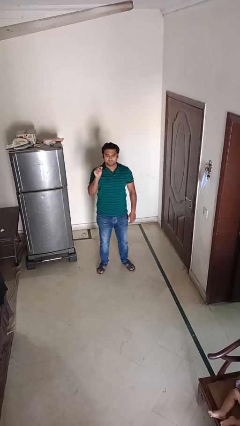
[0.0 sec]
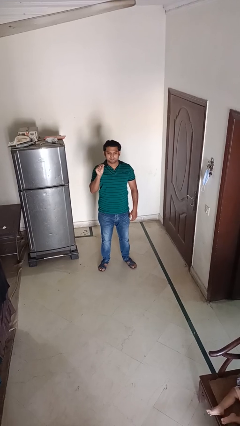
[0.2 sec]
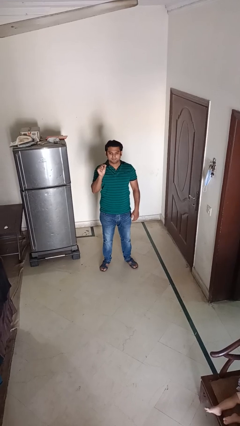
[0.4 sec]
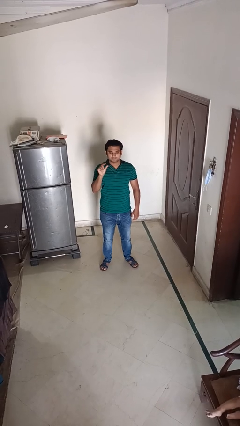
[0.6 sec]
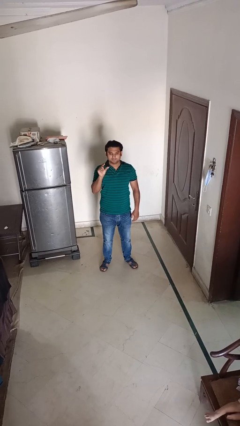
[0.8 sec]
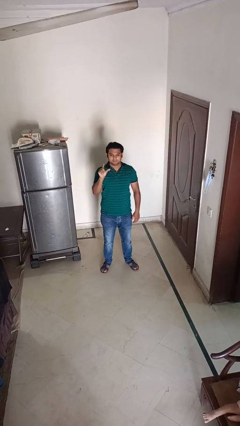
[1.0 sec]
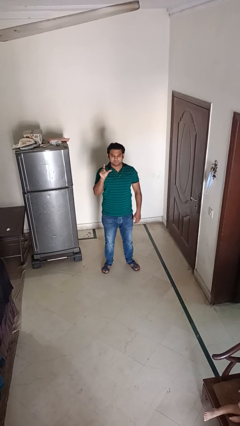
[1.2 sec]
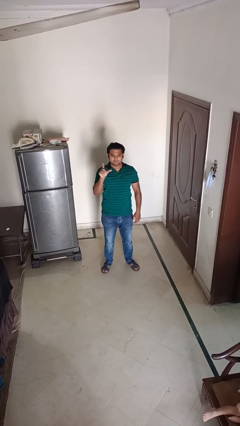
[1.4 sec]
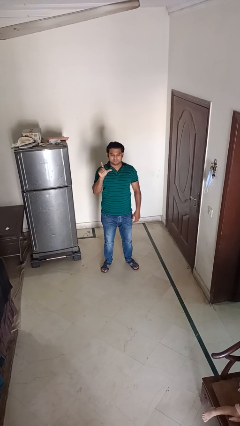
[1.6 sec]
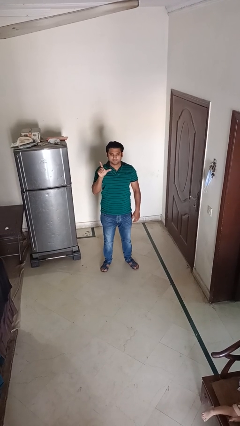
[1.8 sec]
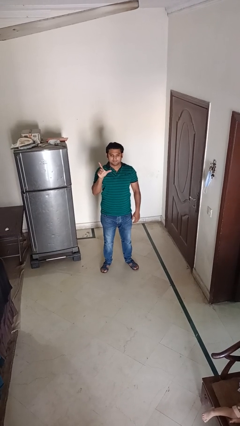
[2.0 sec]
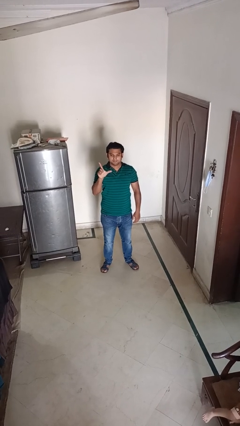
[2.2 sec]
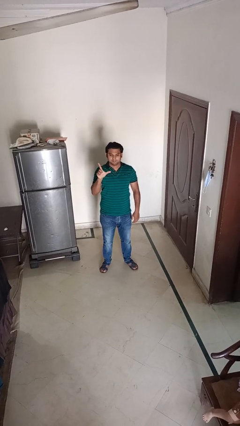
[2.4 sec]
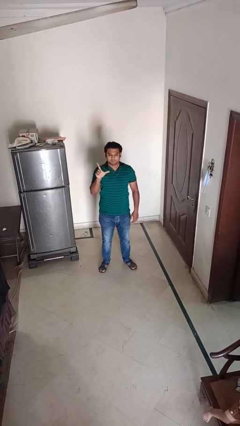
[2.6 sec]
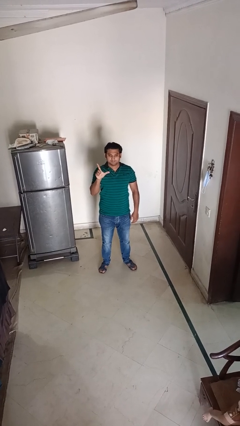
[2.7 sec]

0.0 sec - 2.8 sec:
person gestures zoom out

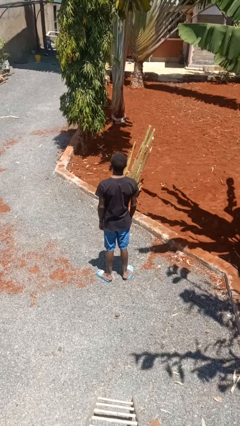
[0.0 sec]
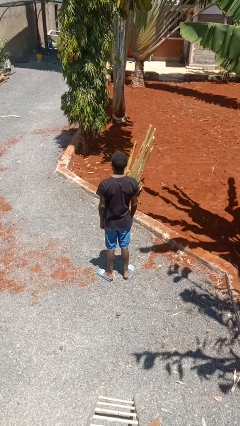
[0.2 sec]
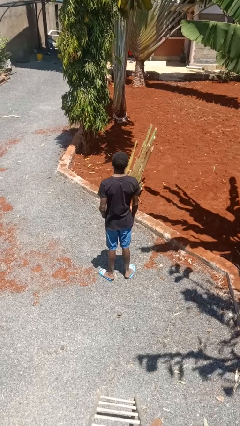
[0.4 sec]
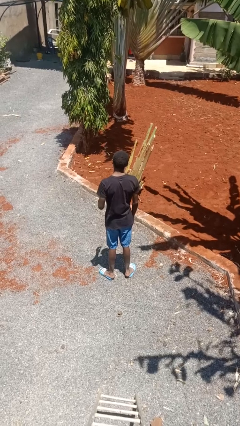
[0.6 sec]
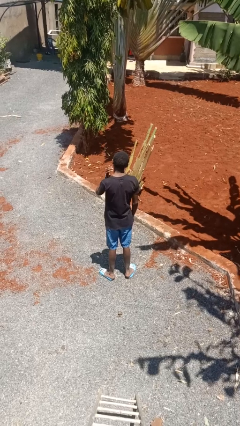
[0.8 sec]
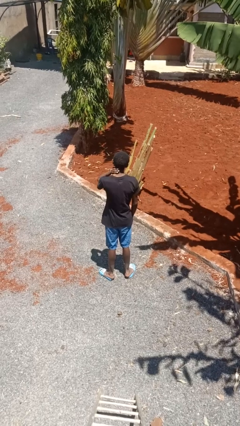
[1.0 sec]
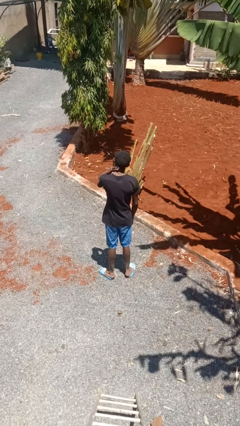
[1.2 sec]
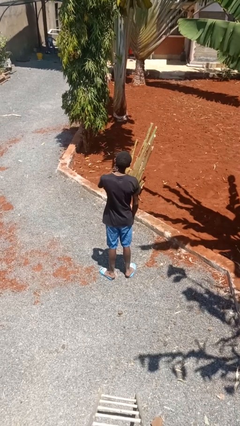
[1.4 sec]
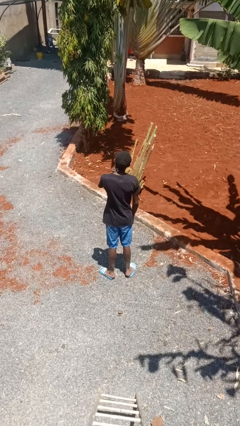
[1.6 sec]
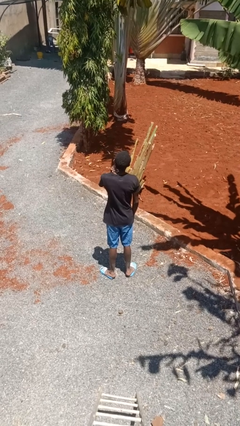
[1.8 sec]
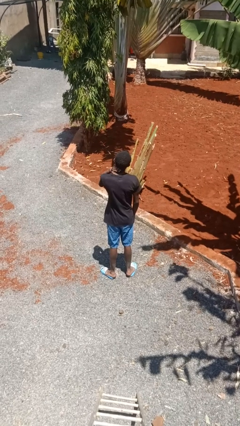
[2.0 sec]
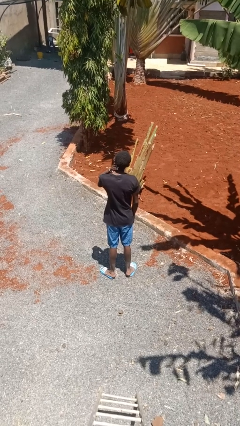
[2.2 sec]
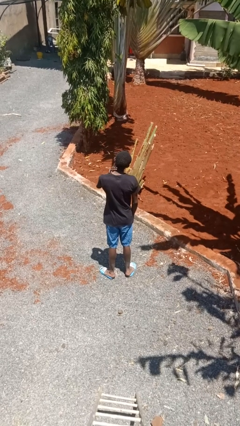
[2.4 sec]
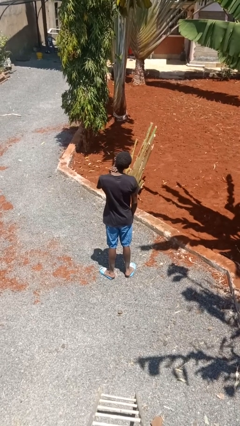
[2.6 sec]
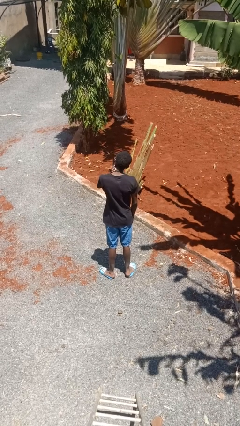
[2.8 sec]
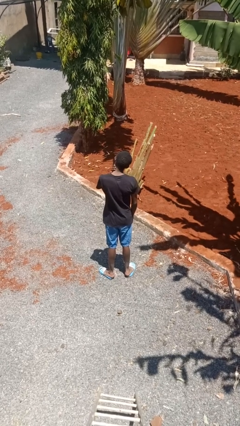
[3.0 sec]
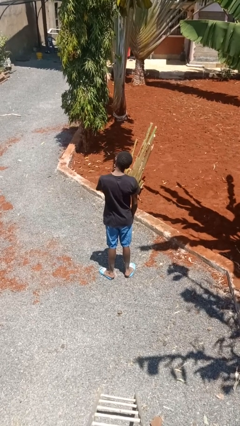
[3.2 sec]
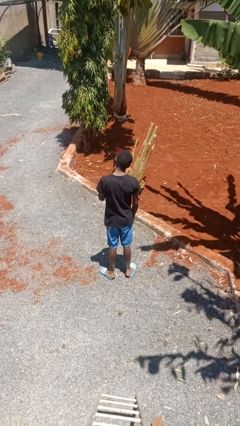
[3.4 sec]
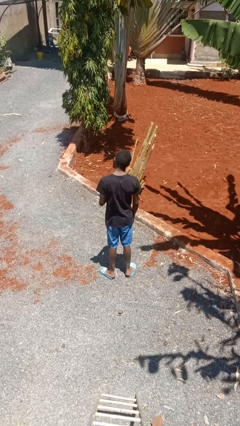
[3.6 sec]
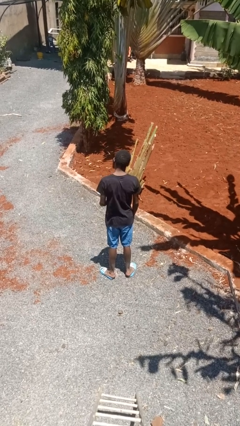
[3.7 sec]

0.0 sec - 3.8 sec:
person rubs neck

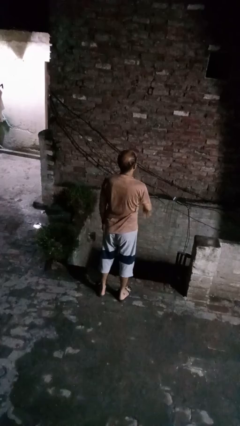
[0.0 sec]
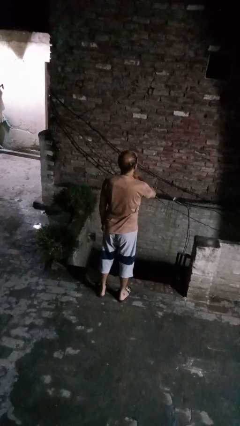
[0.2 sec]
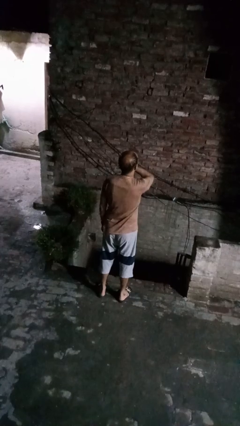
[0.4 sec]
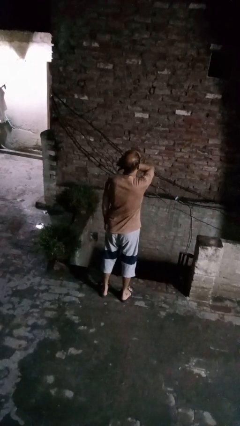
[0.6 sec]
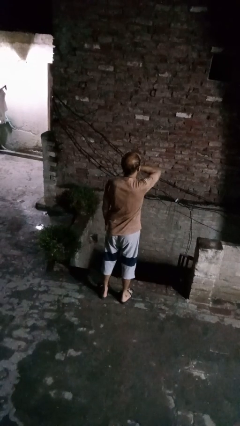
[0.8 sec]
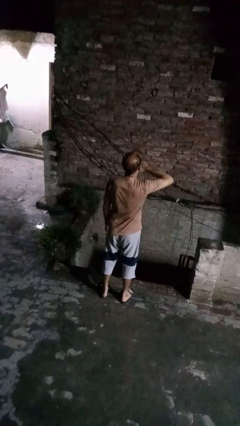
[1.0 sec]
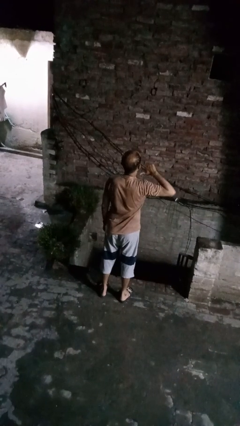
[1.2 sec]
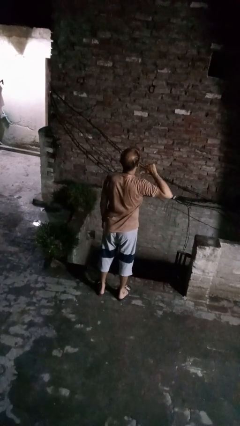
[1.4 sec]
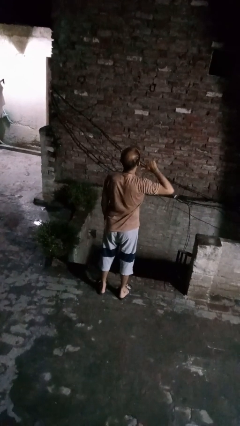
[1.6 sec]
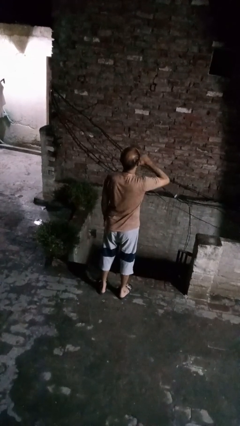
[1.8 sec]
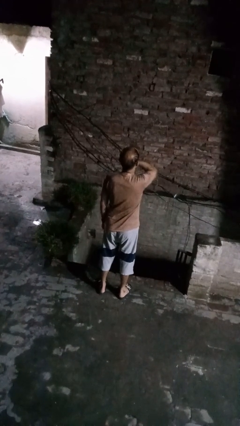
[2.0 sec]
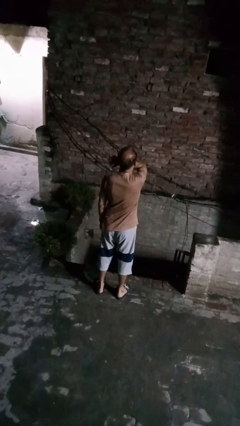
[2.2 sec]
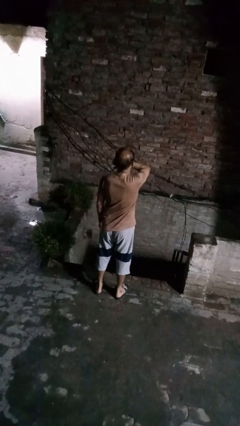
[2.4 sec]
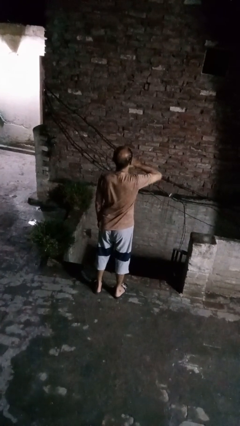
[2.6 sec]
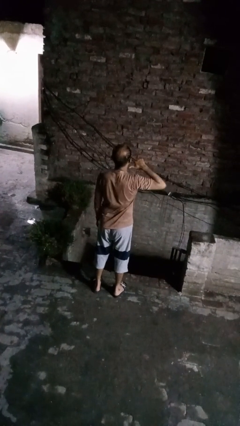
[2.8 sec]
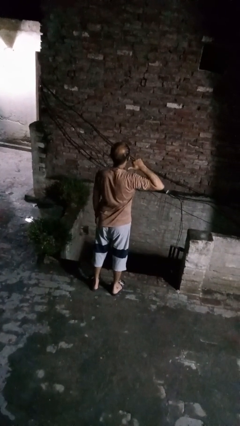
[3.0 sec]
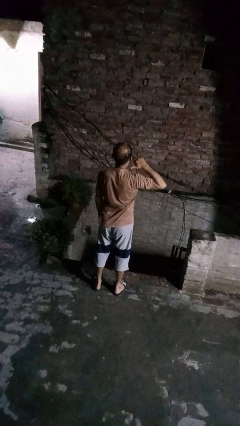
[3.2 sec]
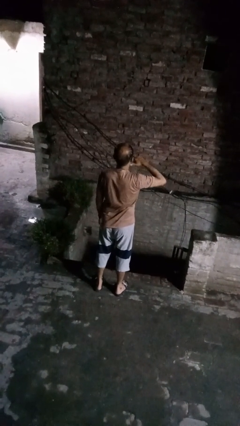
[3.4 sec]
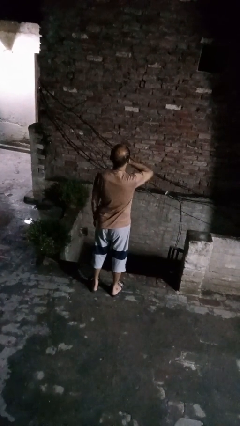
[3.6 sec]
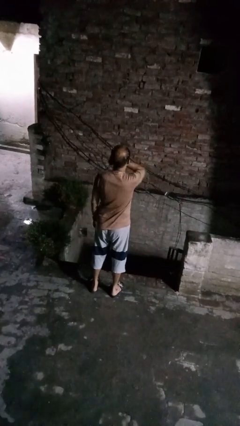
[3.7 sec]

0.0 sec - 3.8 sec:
person gestures cut

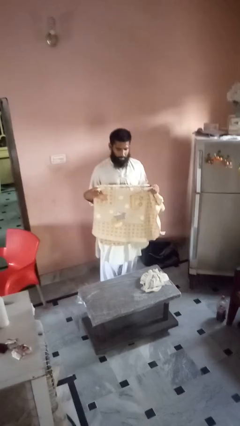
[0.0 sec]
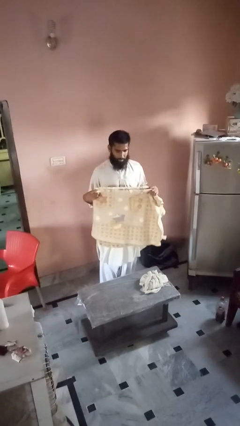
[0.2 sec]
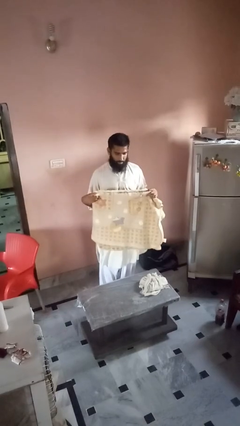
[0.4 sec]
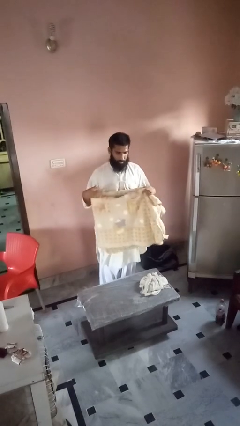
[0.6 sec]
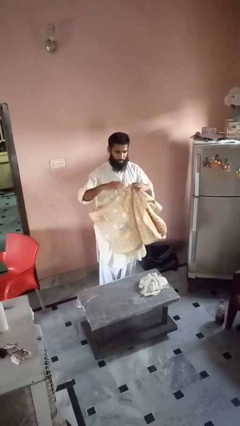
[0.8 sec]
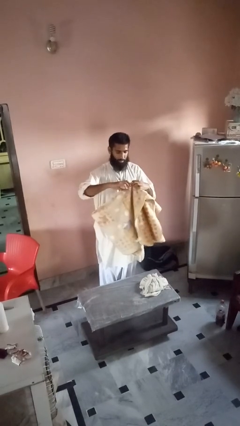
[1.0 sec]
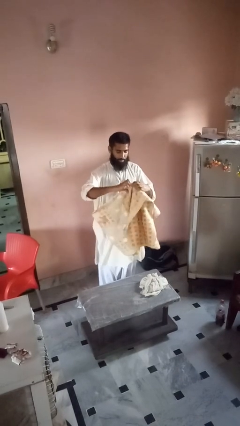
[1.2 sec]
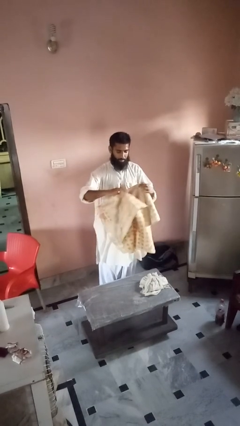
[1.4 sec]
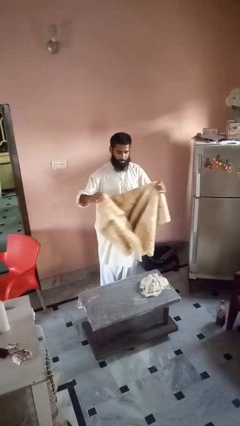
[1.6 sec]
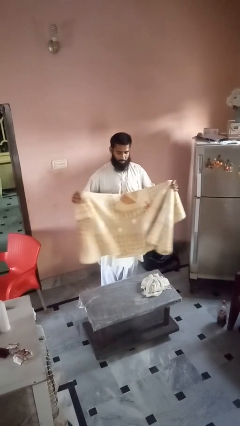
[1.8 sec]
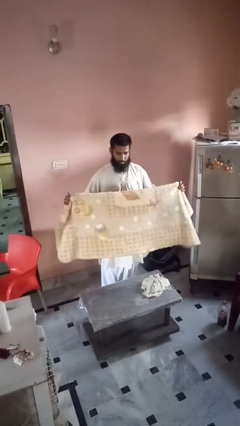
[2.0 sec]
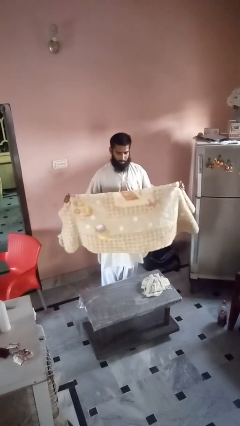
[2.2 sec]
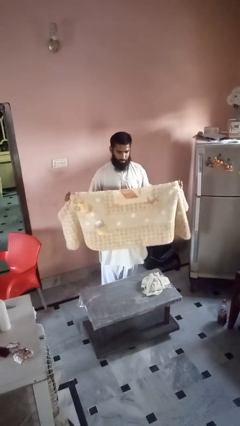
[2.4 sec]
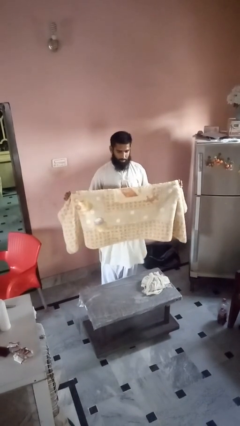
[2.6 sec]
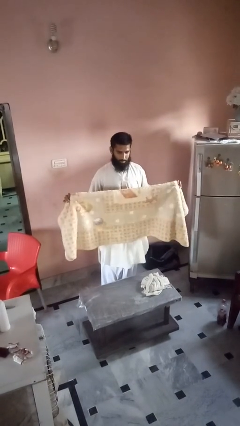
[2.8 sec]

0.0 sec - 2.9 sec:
person unfolds blanket

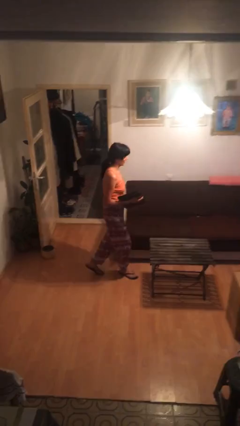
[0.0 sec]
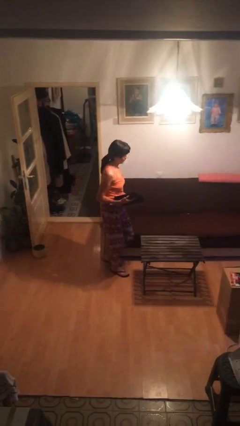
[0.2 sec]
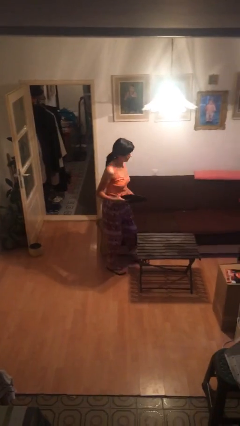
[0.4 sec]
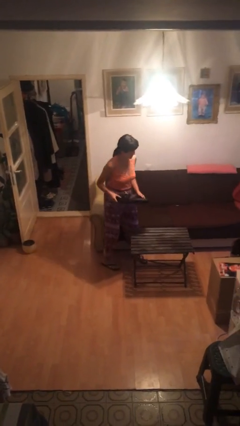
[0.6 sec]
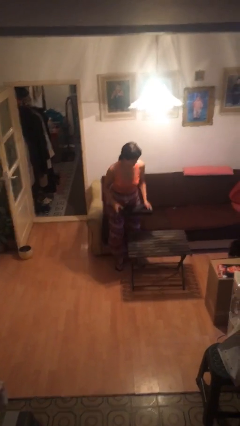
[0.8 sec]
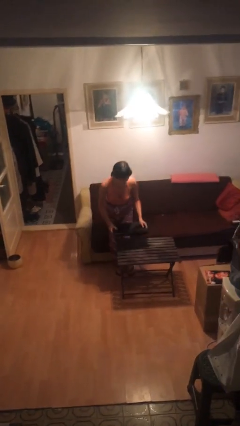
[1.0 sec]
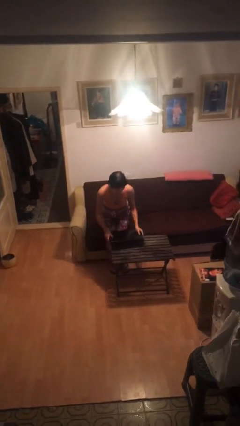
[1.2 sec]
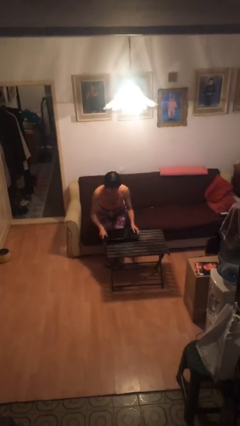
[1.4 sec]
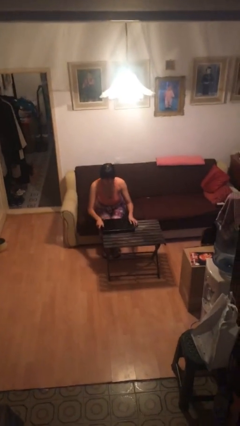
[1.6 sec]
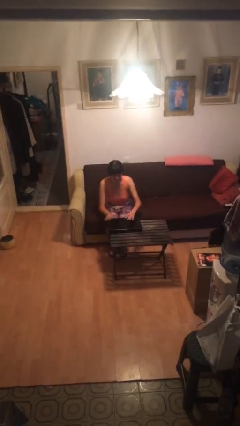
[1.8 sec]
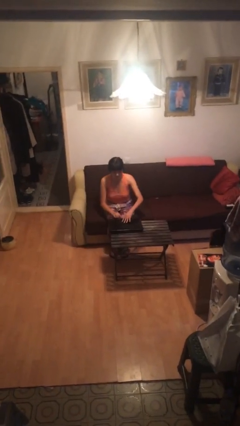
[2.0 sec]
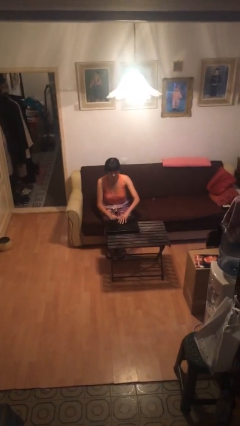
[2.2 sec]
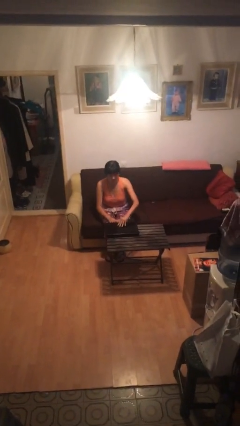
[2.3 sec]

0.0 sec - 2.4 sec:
person sits down

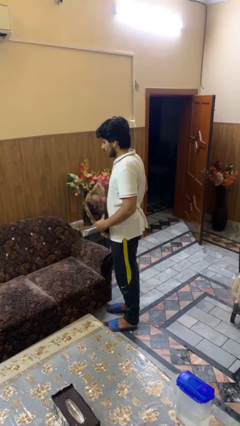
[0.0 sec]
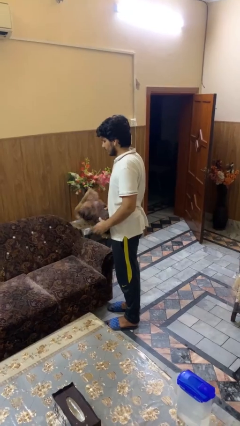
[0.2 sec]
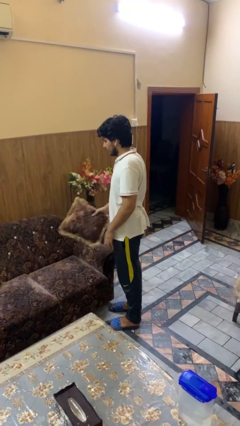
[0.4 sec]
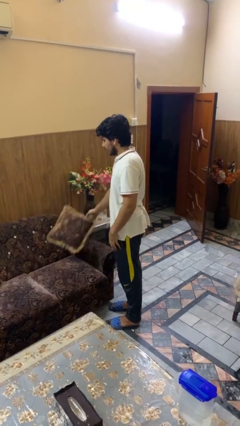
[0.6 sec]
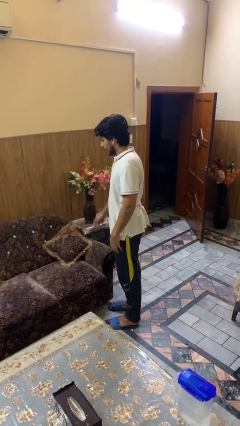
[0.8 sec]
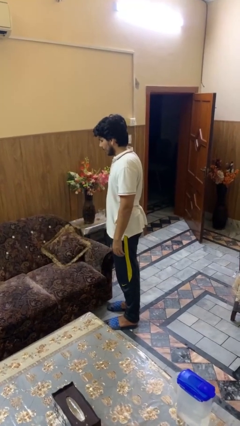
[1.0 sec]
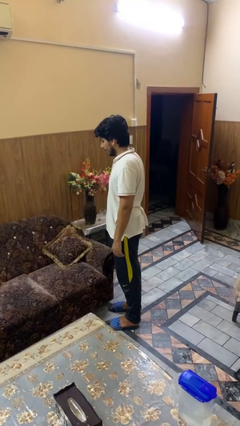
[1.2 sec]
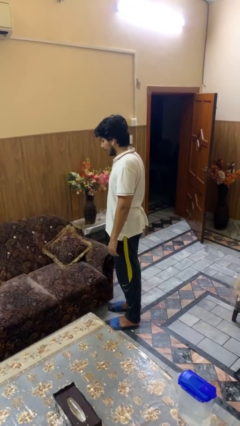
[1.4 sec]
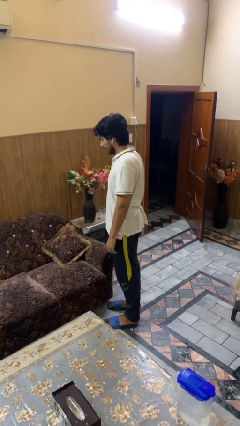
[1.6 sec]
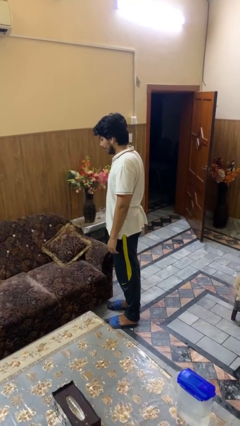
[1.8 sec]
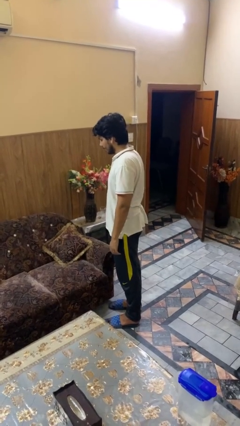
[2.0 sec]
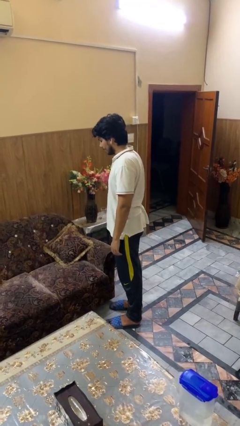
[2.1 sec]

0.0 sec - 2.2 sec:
person puts down object on couch
